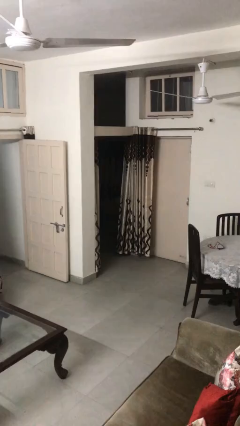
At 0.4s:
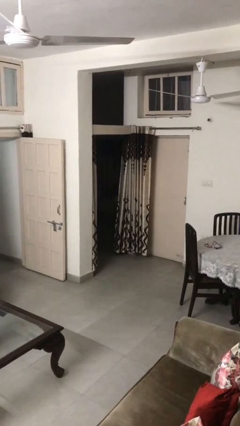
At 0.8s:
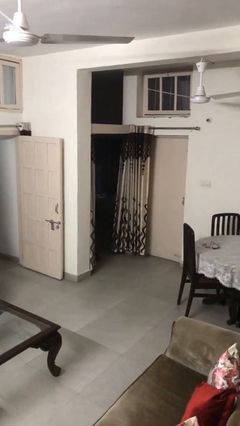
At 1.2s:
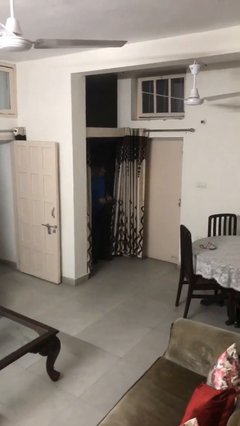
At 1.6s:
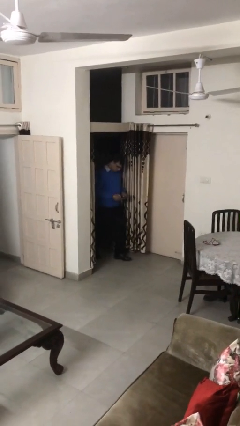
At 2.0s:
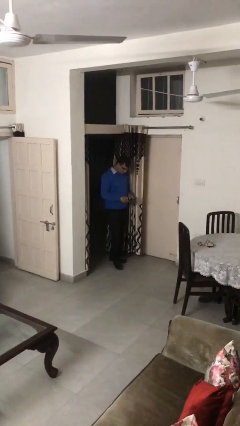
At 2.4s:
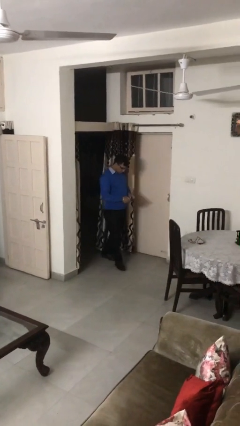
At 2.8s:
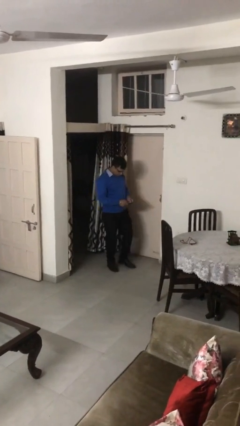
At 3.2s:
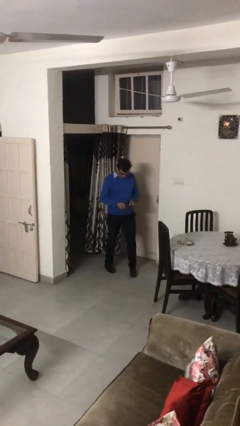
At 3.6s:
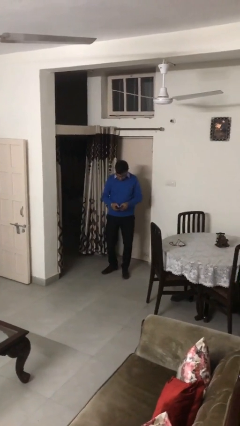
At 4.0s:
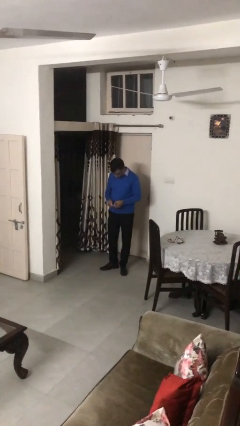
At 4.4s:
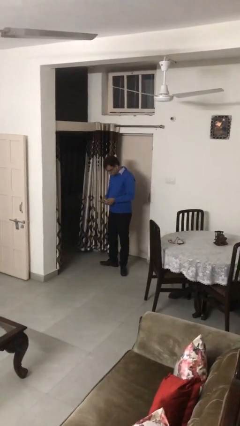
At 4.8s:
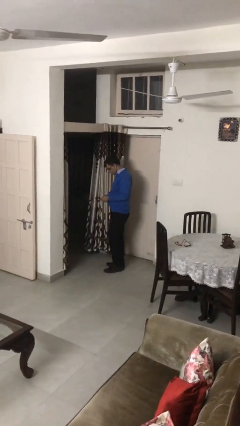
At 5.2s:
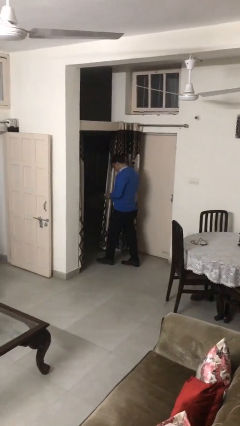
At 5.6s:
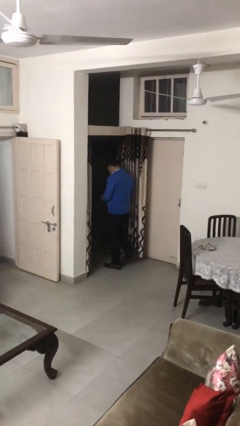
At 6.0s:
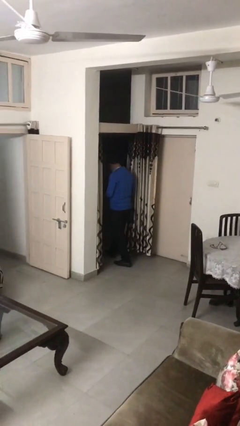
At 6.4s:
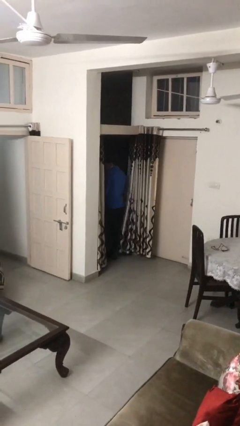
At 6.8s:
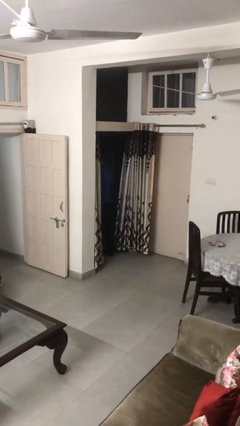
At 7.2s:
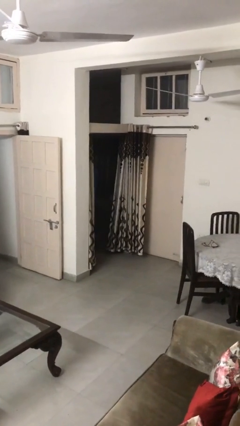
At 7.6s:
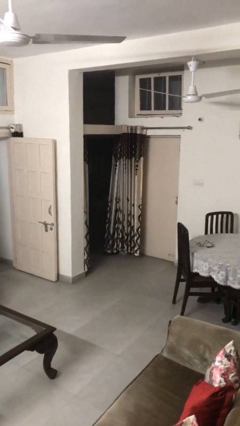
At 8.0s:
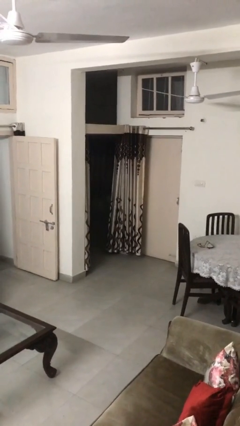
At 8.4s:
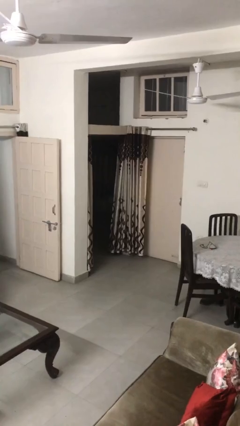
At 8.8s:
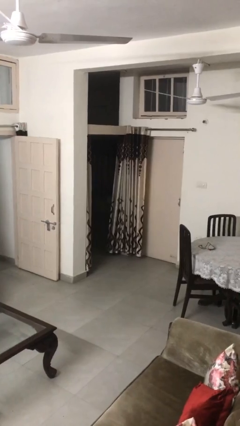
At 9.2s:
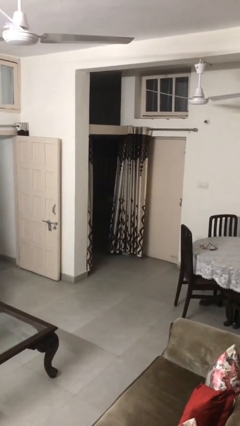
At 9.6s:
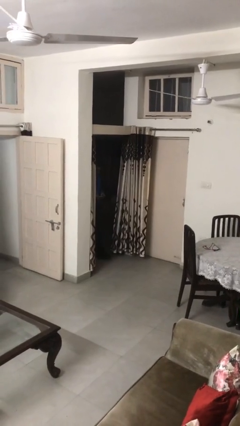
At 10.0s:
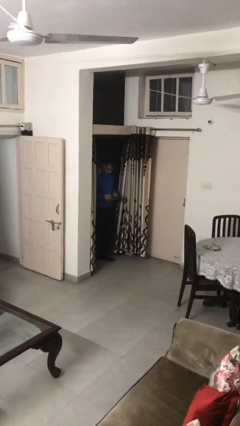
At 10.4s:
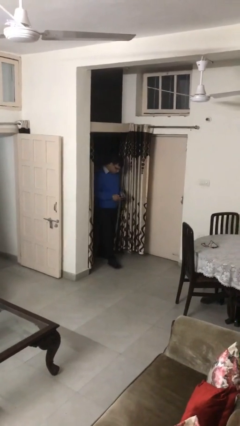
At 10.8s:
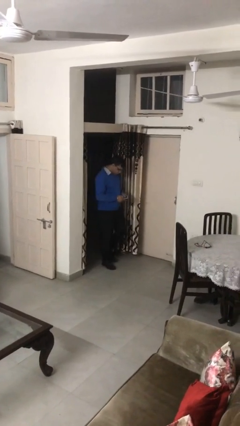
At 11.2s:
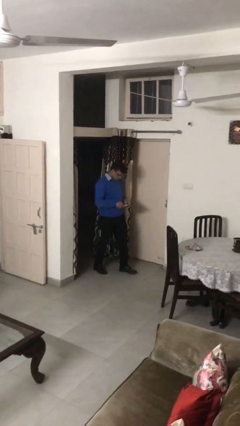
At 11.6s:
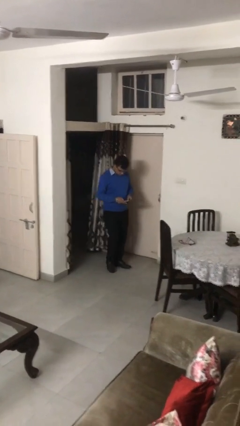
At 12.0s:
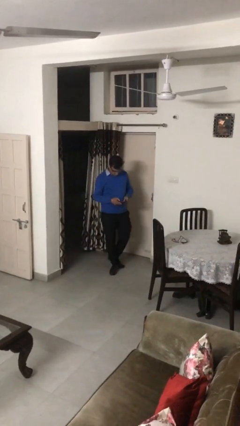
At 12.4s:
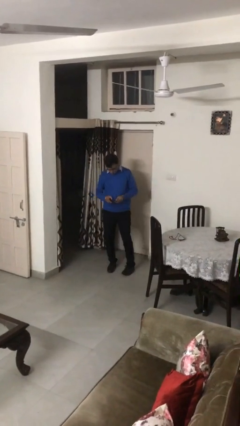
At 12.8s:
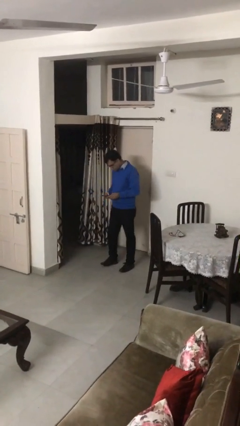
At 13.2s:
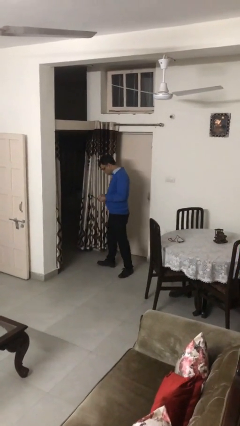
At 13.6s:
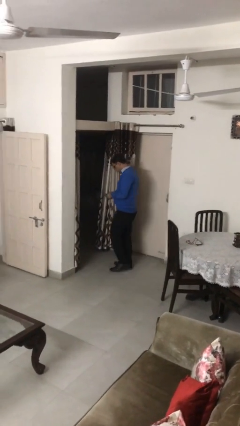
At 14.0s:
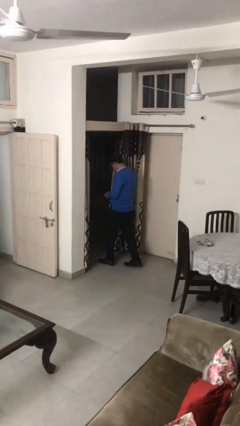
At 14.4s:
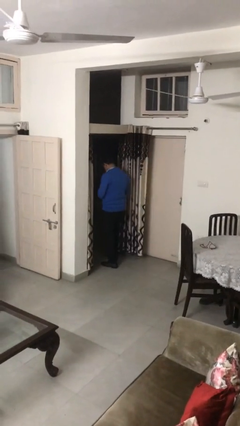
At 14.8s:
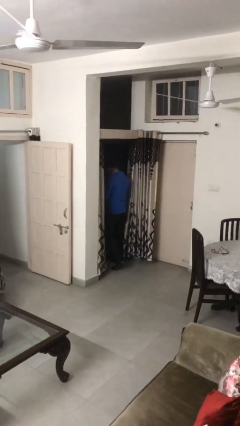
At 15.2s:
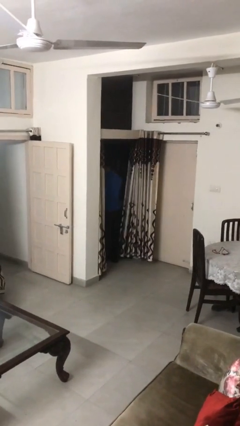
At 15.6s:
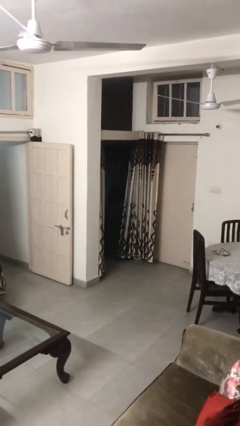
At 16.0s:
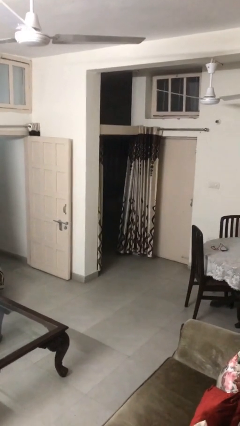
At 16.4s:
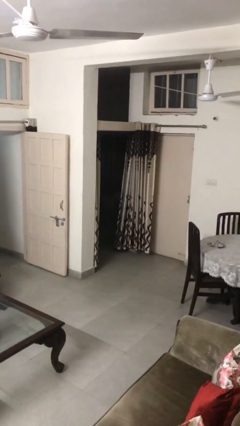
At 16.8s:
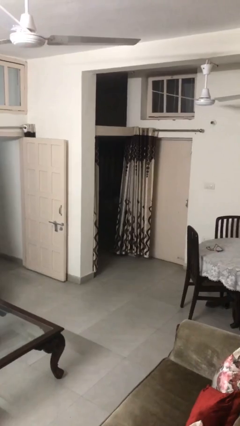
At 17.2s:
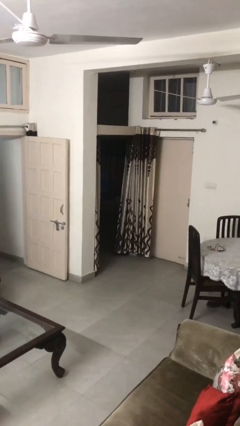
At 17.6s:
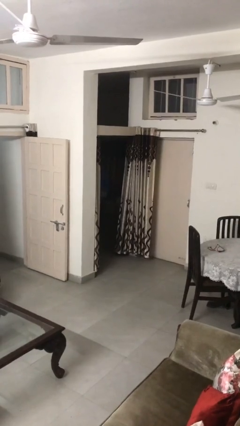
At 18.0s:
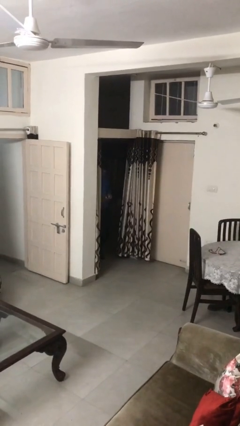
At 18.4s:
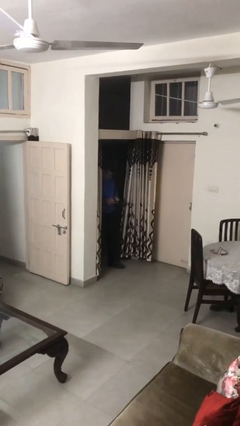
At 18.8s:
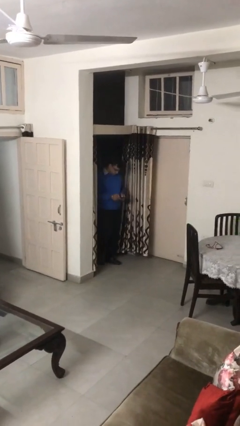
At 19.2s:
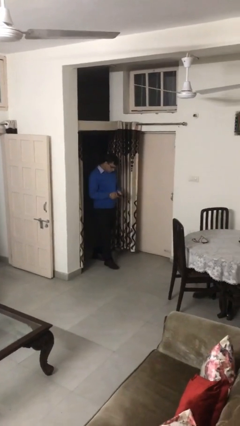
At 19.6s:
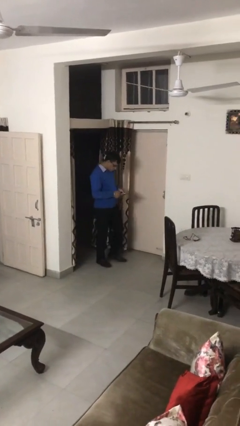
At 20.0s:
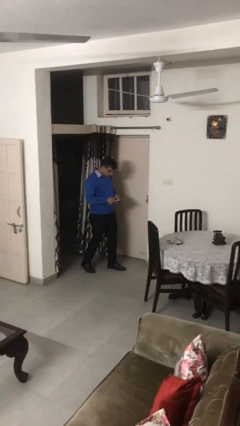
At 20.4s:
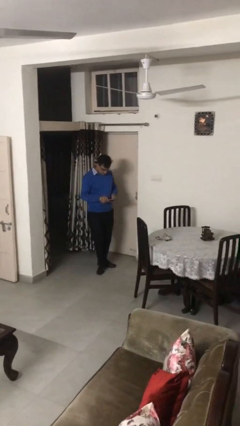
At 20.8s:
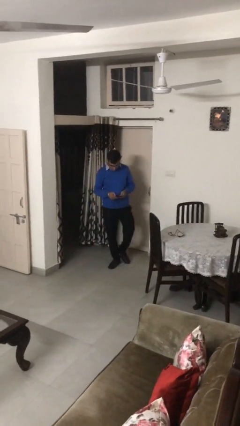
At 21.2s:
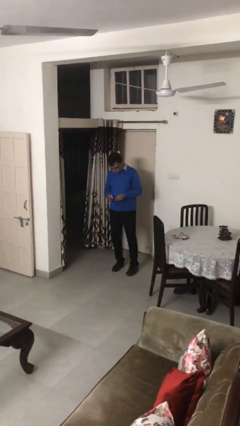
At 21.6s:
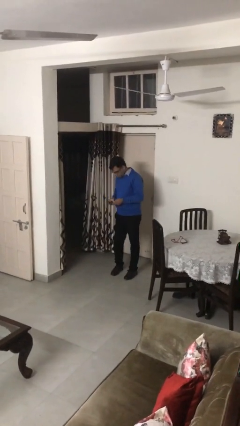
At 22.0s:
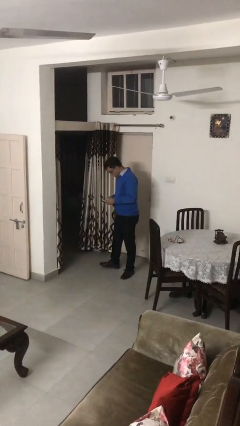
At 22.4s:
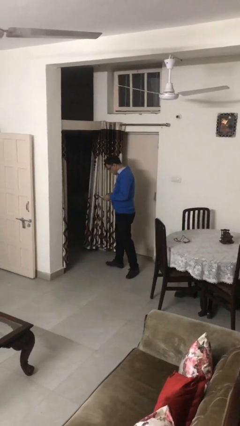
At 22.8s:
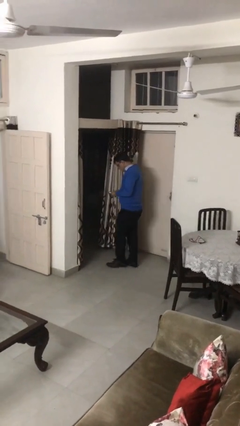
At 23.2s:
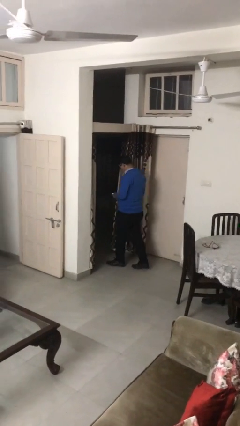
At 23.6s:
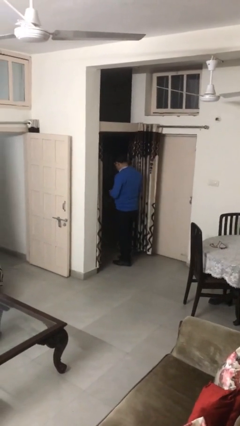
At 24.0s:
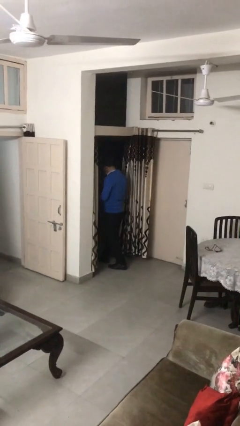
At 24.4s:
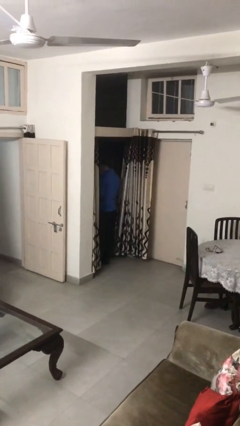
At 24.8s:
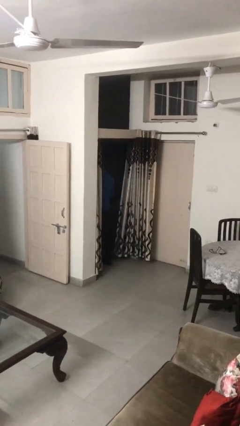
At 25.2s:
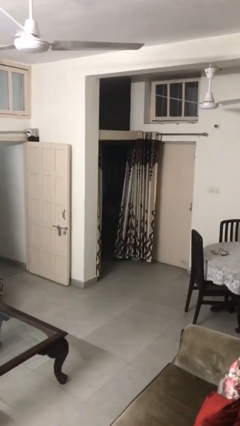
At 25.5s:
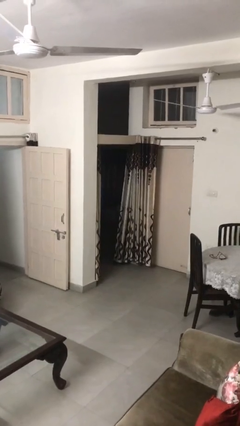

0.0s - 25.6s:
person texts on phone

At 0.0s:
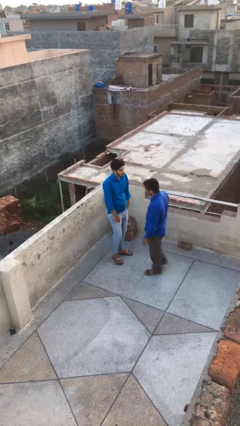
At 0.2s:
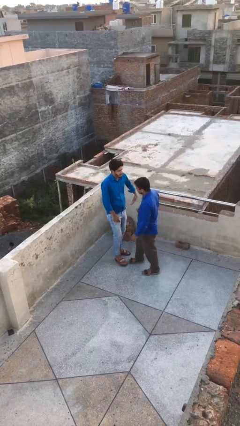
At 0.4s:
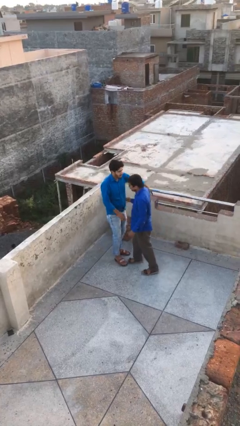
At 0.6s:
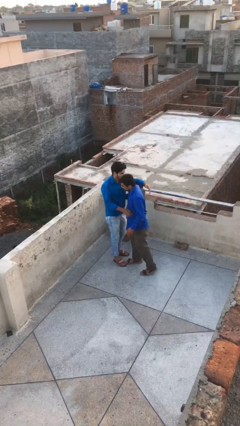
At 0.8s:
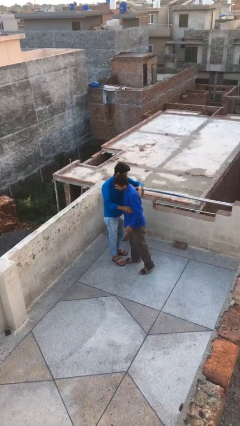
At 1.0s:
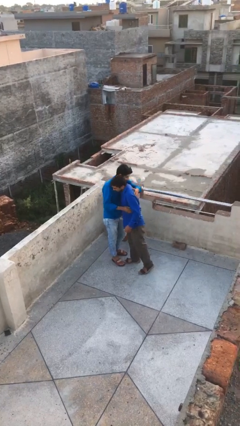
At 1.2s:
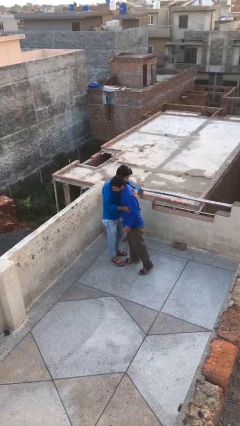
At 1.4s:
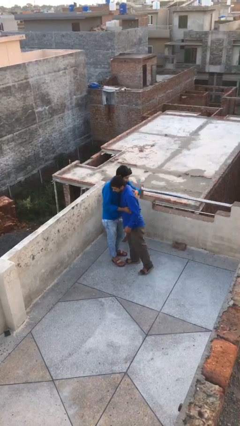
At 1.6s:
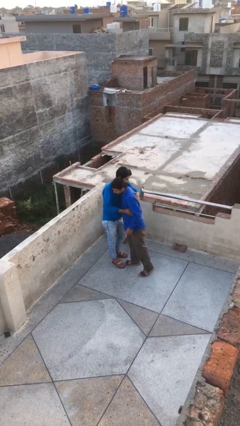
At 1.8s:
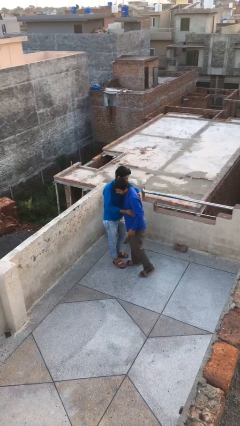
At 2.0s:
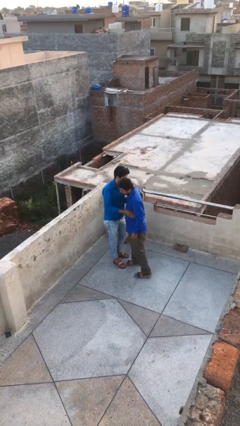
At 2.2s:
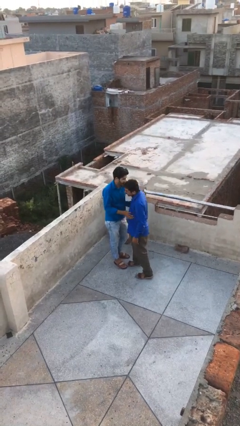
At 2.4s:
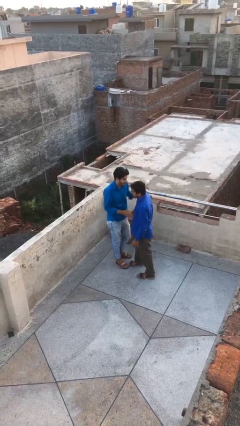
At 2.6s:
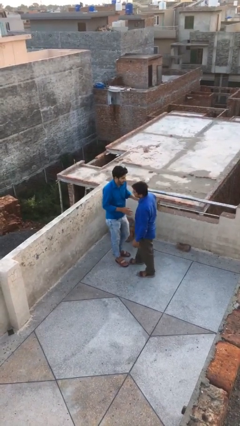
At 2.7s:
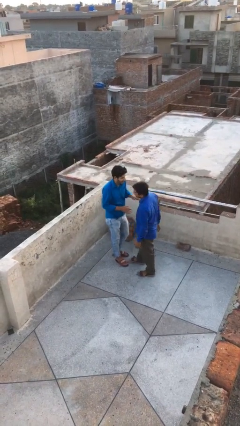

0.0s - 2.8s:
person embraces person

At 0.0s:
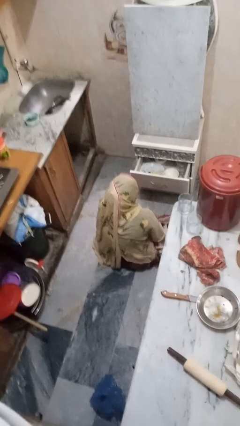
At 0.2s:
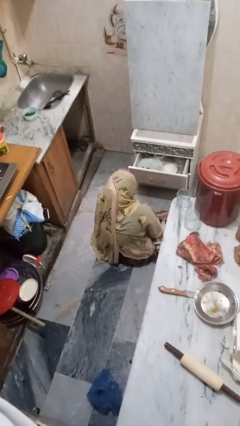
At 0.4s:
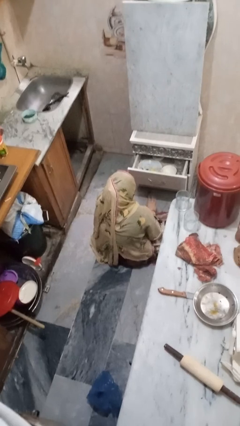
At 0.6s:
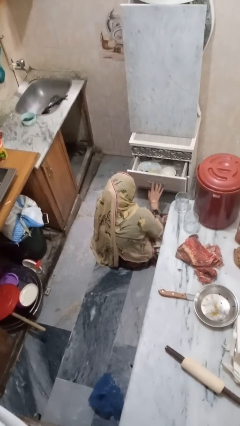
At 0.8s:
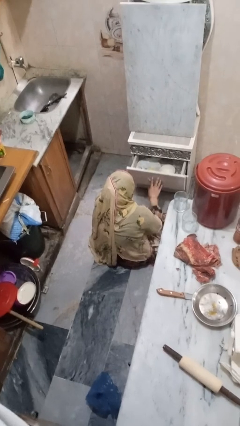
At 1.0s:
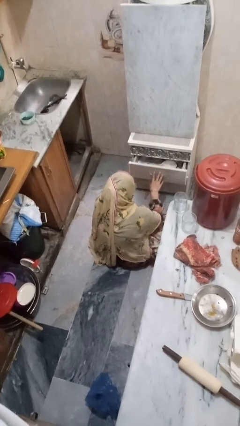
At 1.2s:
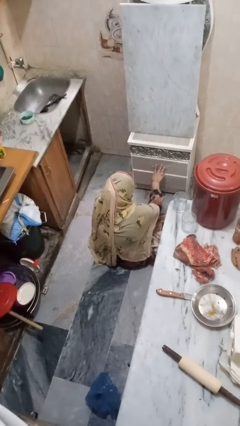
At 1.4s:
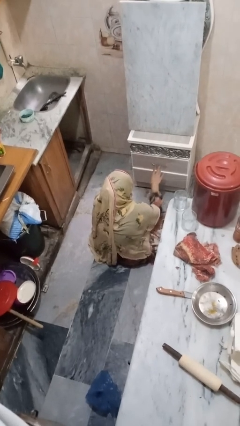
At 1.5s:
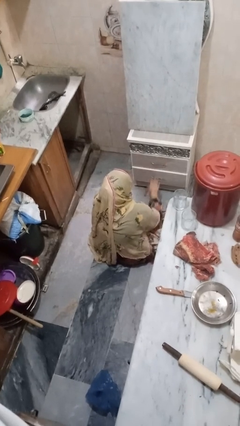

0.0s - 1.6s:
person closes kitchen drawer

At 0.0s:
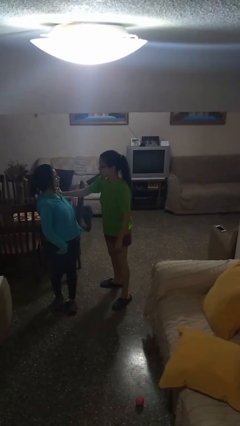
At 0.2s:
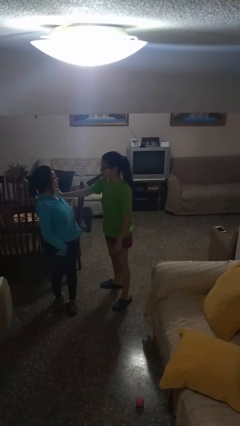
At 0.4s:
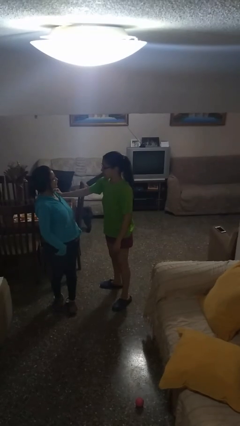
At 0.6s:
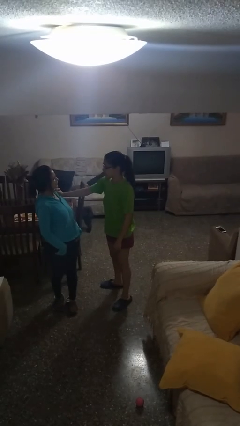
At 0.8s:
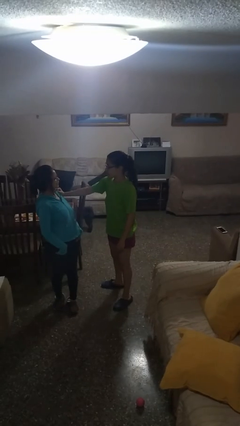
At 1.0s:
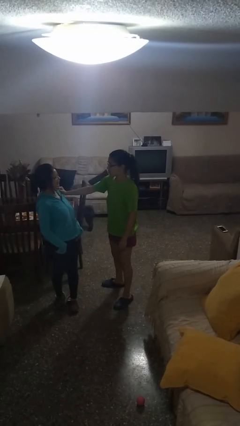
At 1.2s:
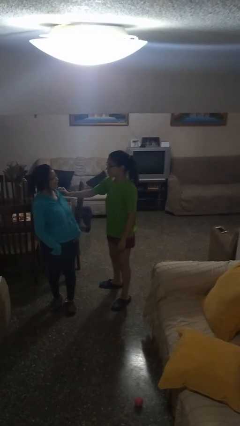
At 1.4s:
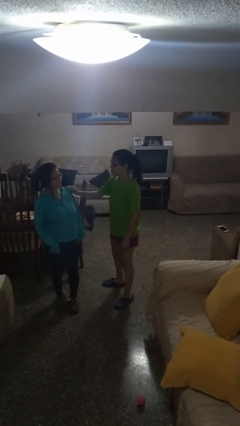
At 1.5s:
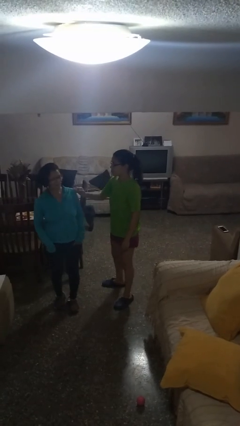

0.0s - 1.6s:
person spins person around
